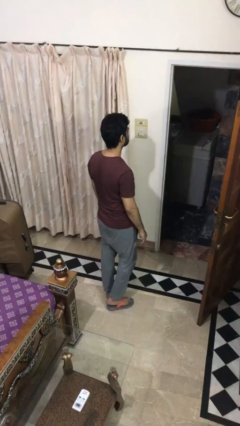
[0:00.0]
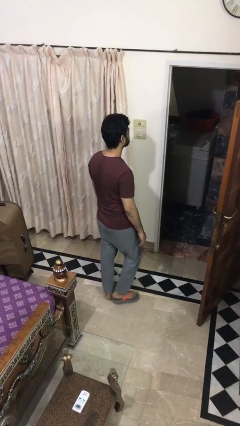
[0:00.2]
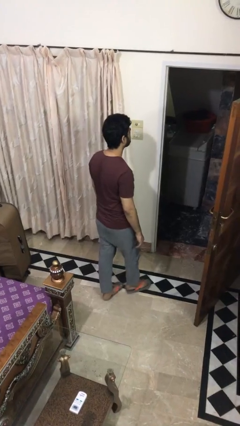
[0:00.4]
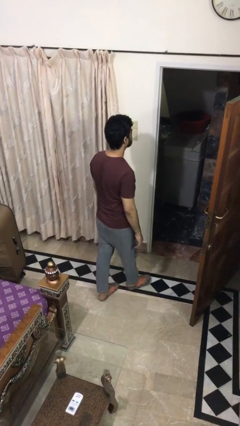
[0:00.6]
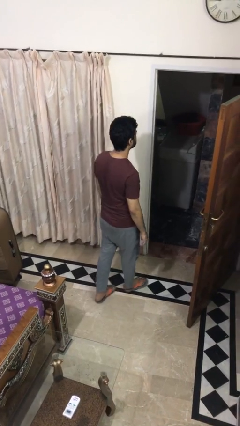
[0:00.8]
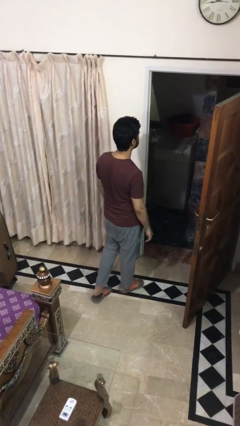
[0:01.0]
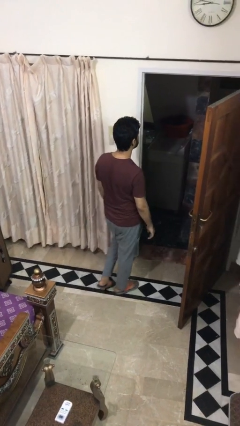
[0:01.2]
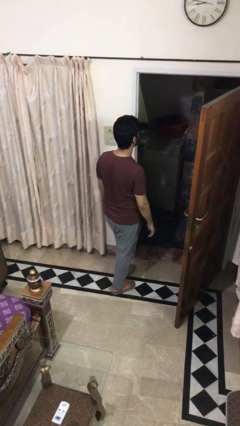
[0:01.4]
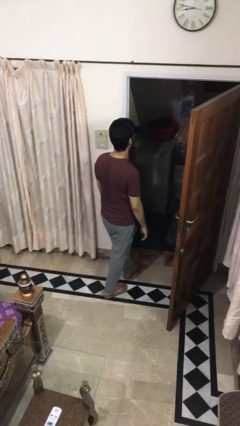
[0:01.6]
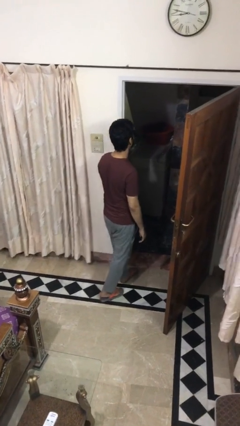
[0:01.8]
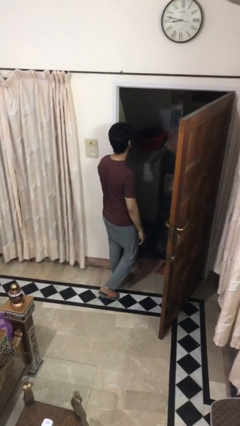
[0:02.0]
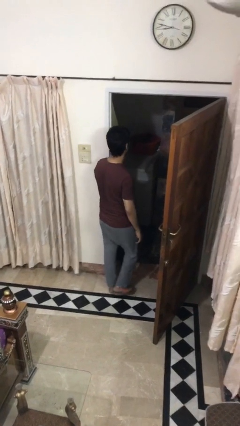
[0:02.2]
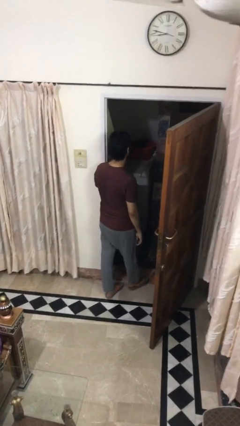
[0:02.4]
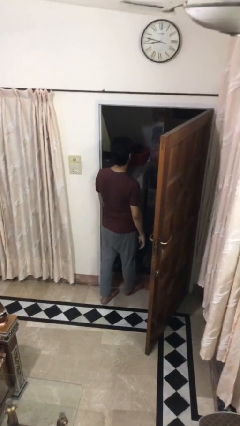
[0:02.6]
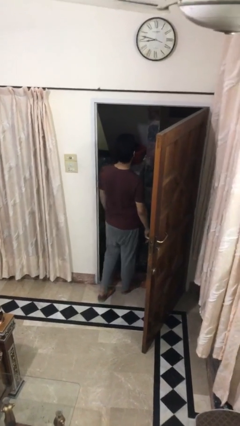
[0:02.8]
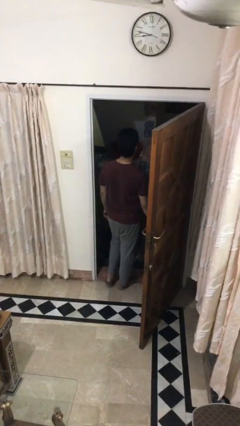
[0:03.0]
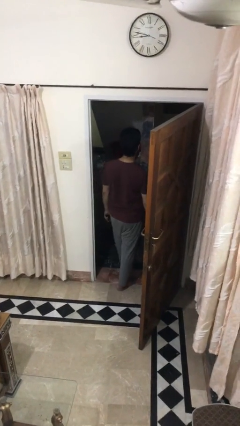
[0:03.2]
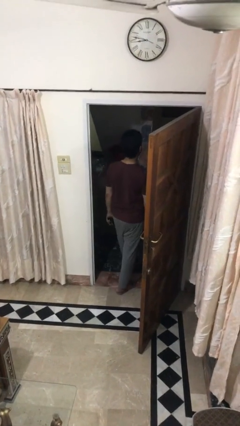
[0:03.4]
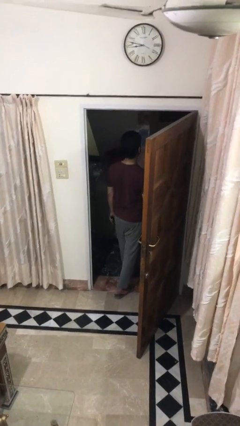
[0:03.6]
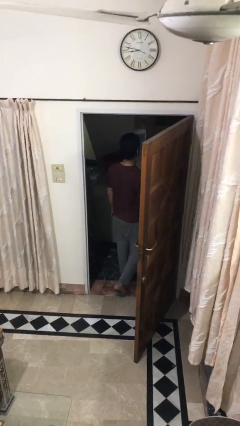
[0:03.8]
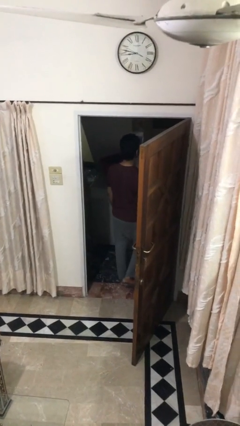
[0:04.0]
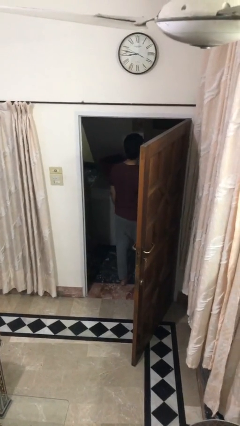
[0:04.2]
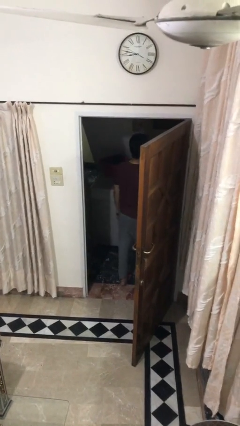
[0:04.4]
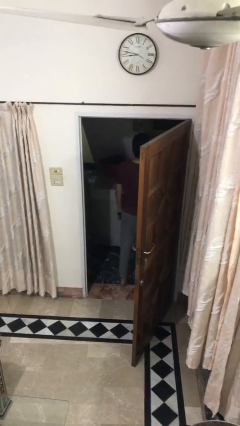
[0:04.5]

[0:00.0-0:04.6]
person exits scene through structure

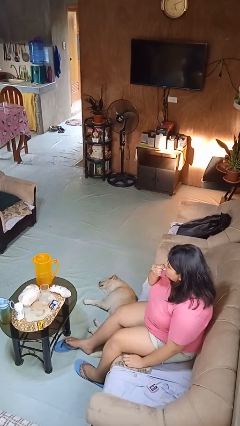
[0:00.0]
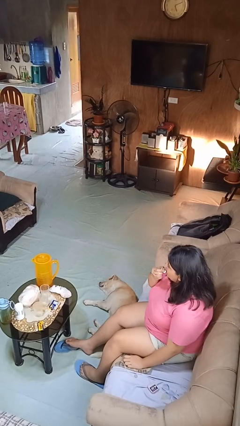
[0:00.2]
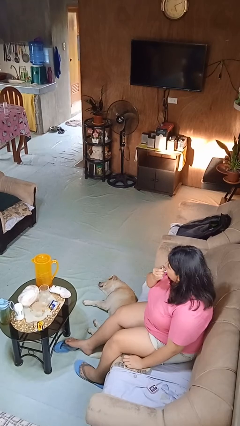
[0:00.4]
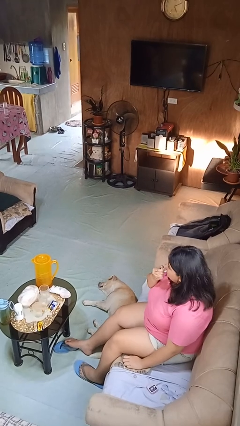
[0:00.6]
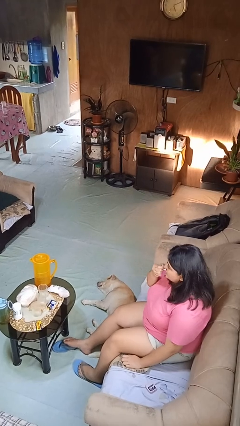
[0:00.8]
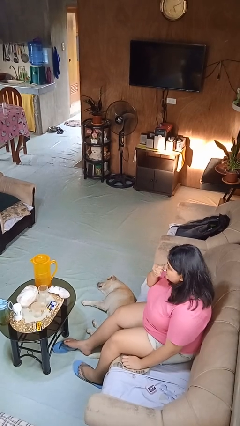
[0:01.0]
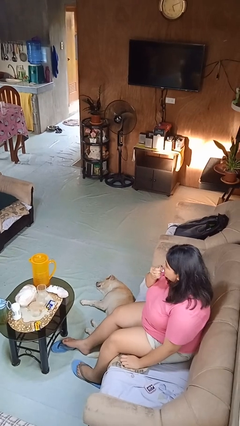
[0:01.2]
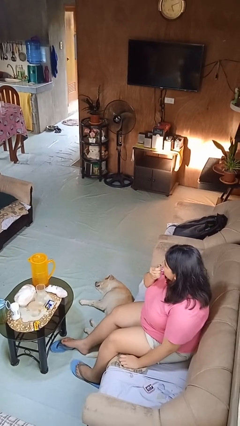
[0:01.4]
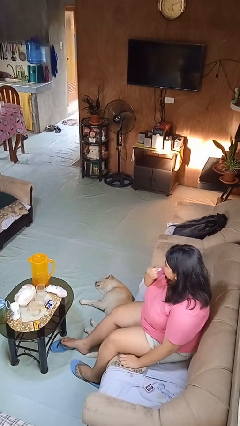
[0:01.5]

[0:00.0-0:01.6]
person applies lip makeup

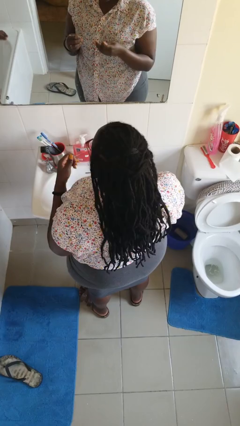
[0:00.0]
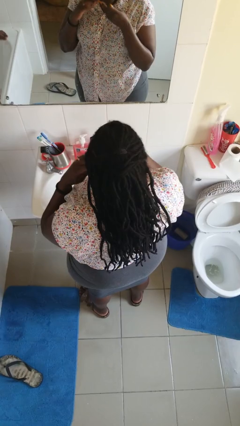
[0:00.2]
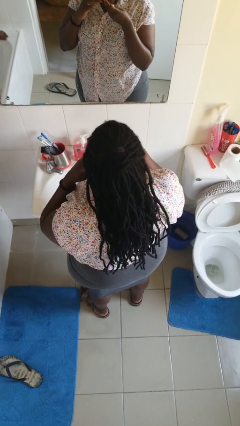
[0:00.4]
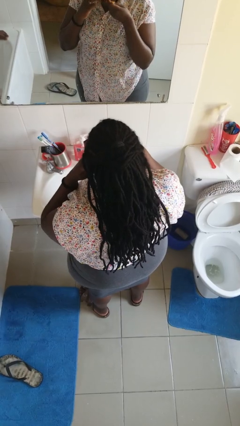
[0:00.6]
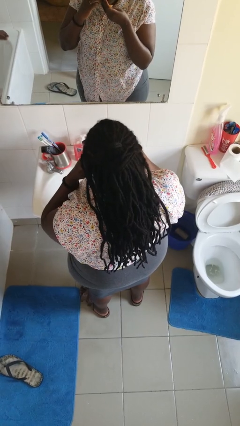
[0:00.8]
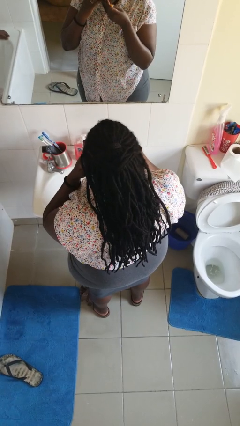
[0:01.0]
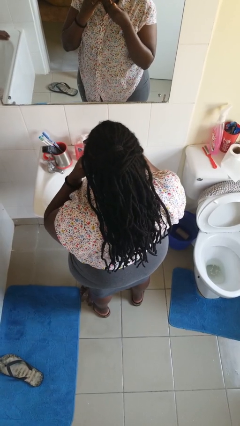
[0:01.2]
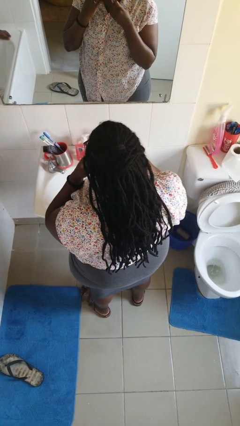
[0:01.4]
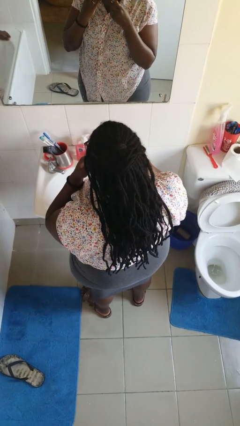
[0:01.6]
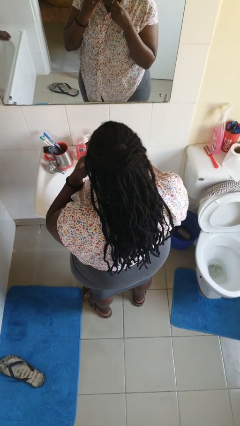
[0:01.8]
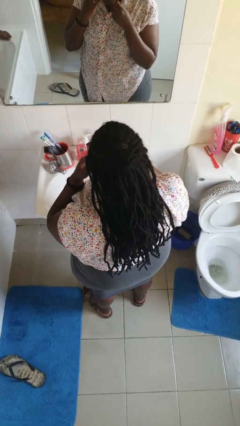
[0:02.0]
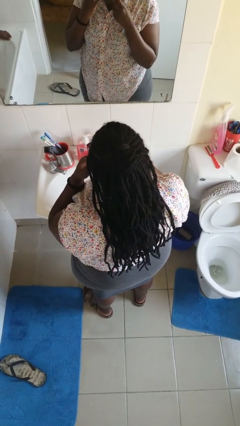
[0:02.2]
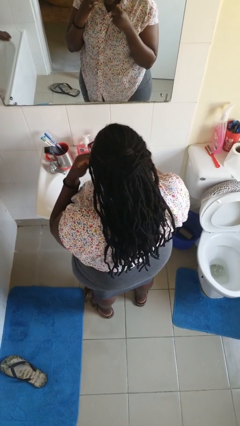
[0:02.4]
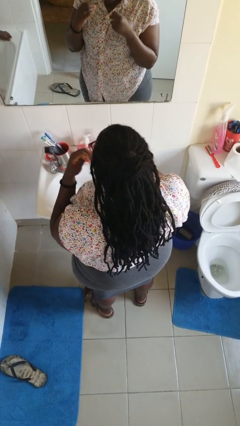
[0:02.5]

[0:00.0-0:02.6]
person flosses

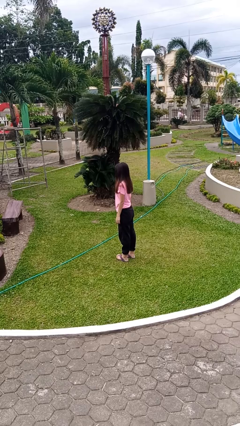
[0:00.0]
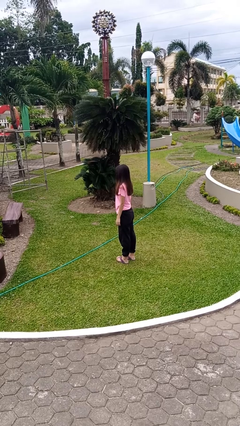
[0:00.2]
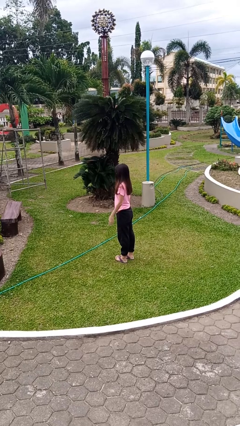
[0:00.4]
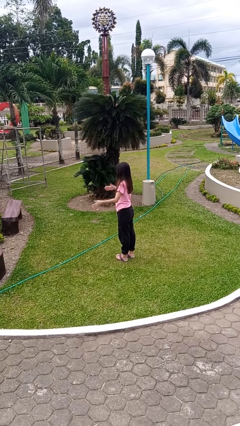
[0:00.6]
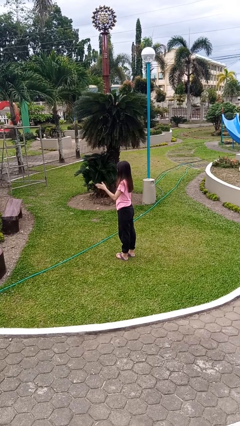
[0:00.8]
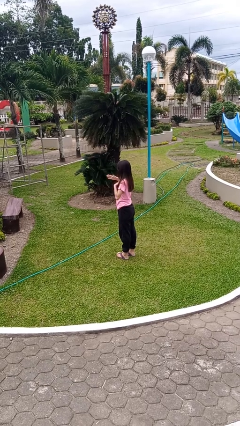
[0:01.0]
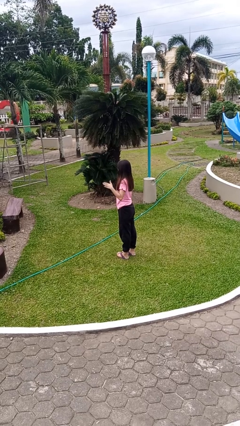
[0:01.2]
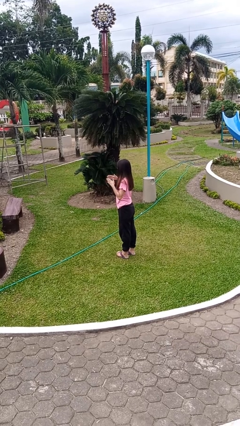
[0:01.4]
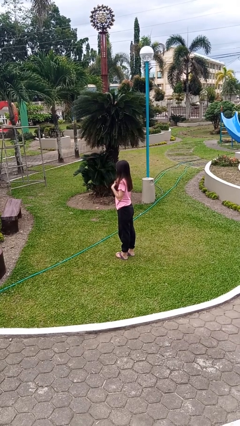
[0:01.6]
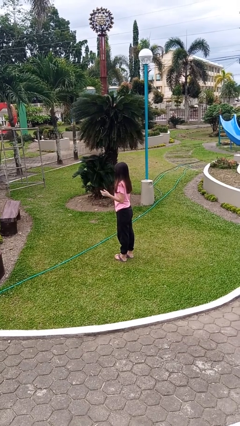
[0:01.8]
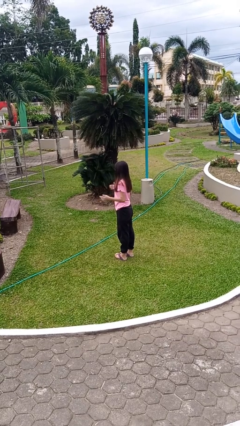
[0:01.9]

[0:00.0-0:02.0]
person drums on chest

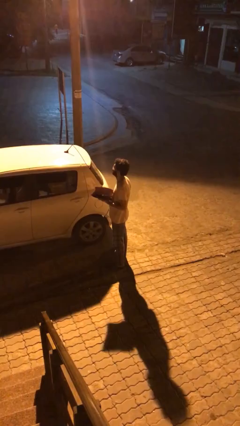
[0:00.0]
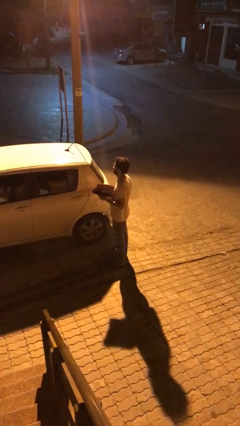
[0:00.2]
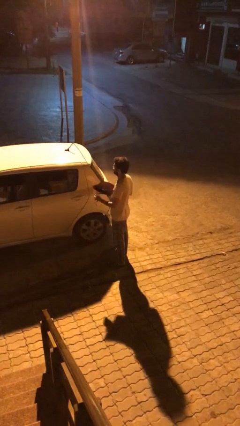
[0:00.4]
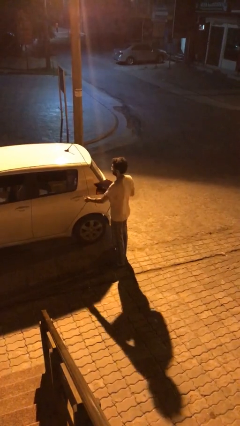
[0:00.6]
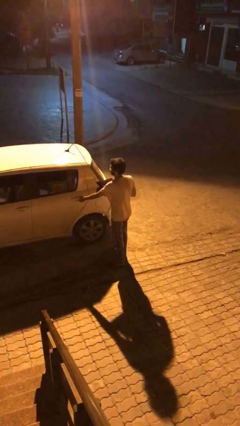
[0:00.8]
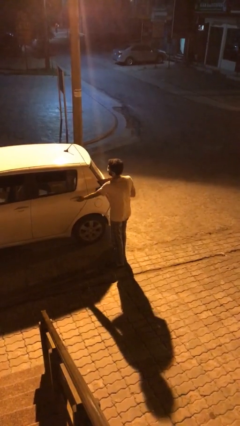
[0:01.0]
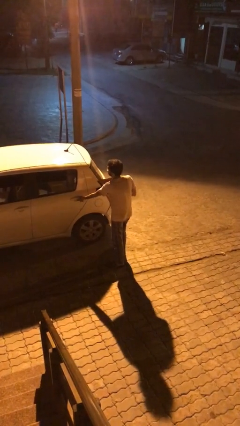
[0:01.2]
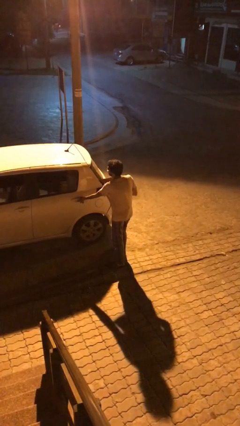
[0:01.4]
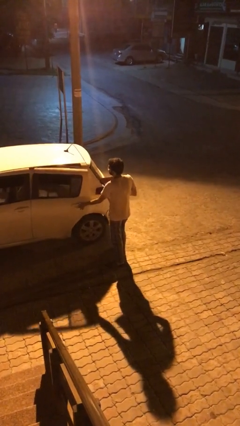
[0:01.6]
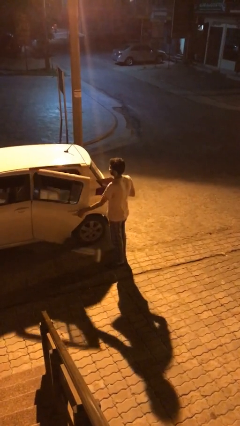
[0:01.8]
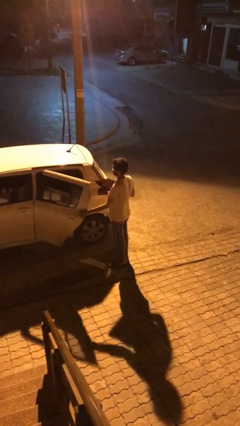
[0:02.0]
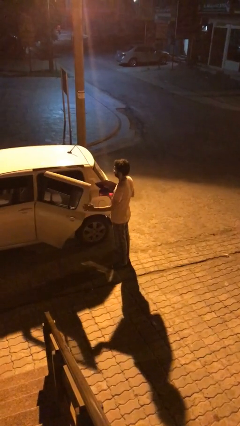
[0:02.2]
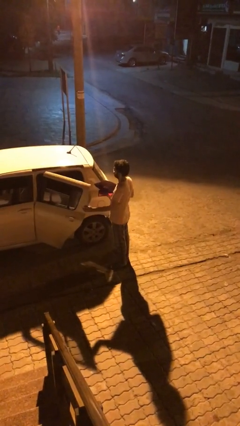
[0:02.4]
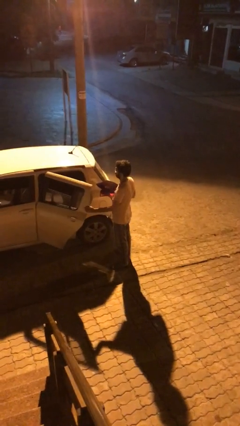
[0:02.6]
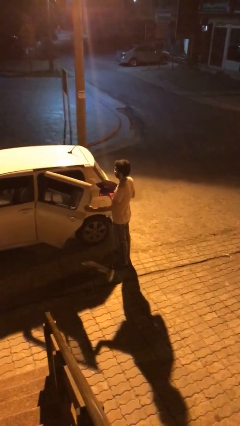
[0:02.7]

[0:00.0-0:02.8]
person opens car door

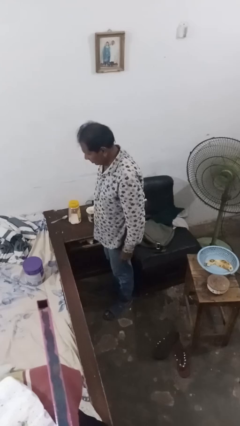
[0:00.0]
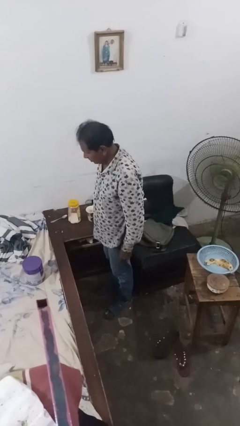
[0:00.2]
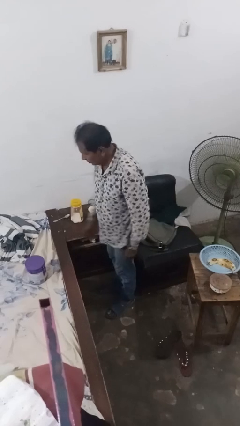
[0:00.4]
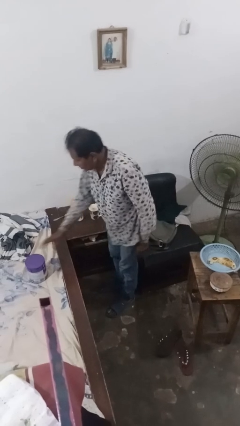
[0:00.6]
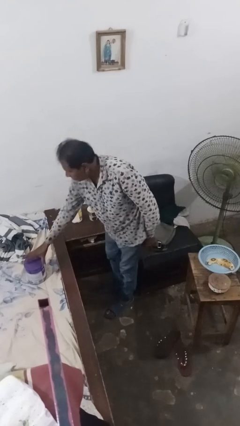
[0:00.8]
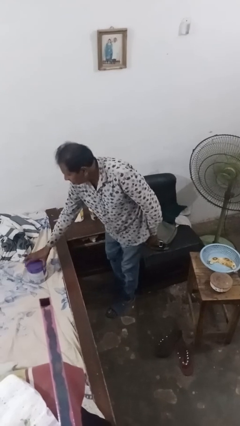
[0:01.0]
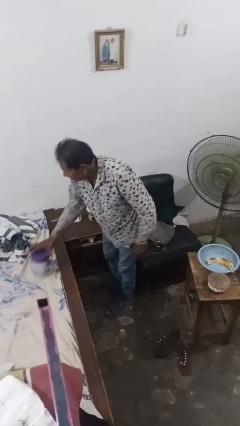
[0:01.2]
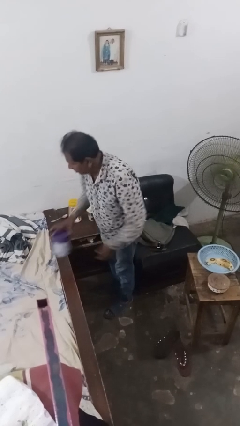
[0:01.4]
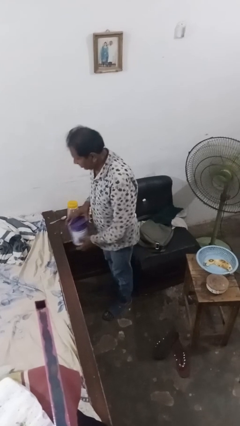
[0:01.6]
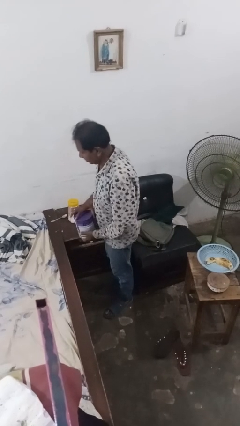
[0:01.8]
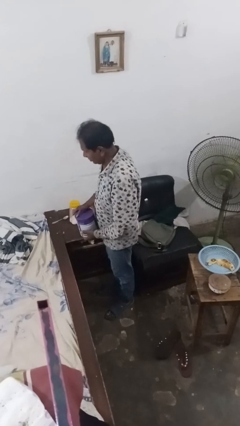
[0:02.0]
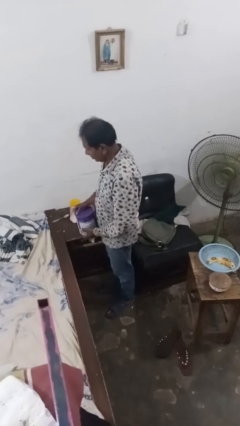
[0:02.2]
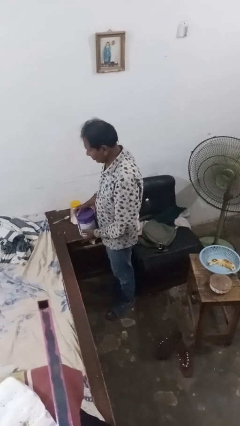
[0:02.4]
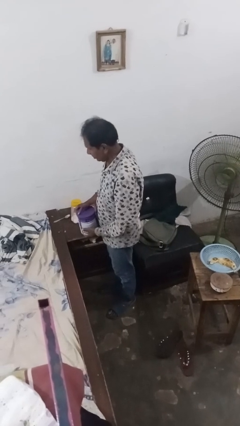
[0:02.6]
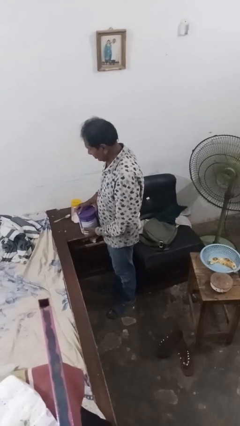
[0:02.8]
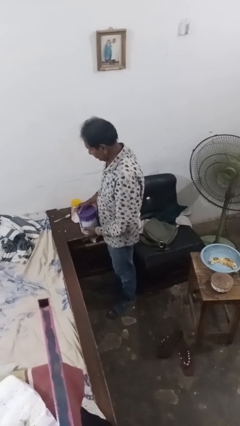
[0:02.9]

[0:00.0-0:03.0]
person picks up object from bed

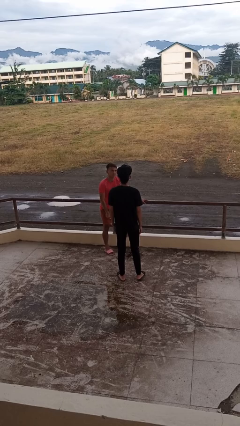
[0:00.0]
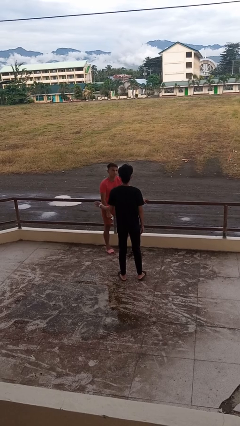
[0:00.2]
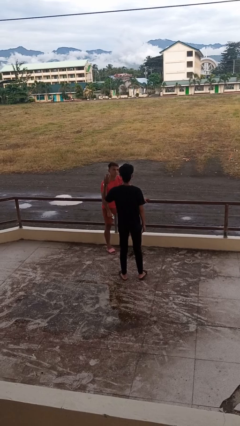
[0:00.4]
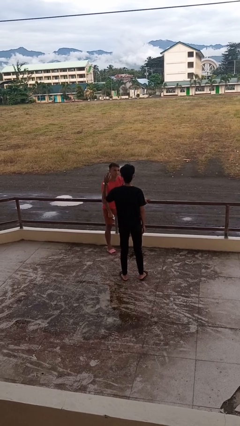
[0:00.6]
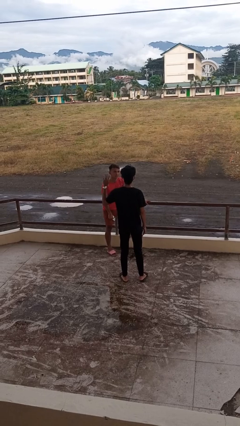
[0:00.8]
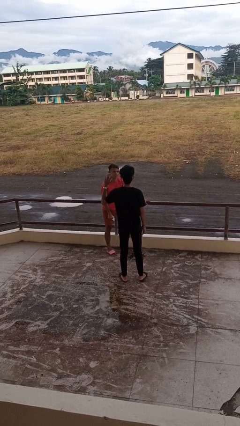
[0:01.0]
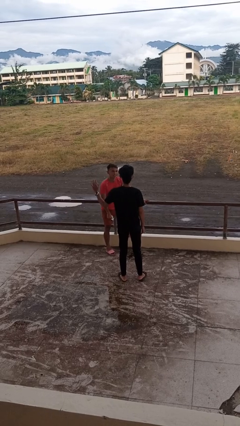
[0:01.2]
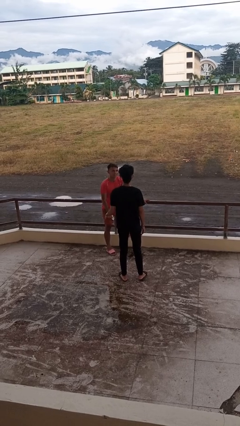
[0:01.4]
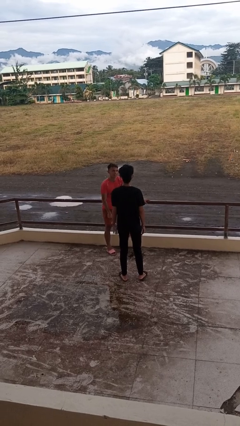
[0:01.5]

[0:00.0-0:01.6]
person waves at person
